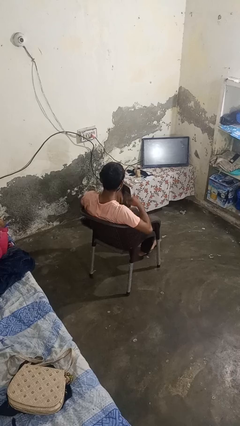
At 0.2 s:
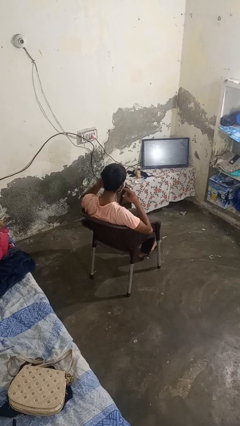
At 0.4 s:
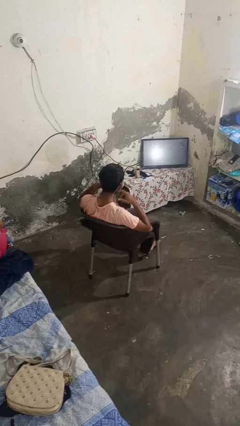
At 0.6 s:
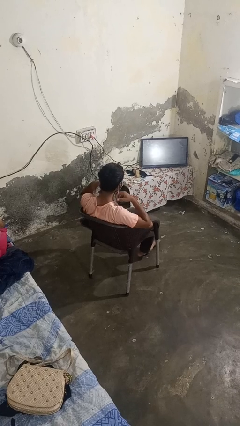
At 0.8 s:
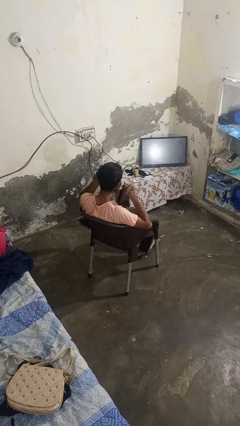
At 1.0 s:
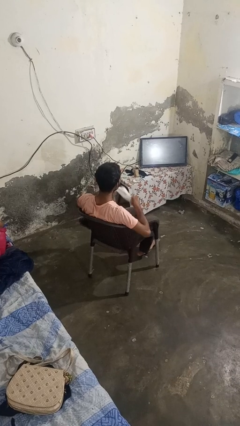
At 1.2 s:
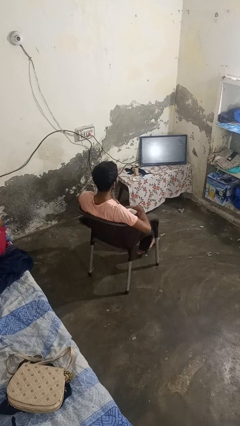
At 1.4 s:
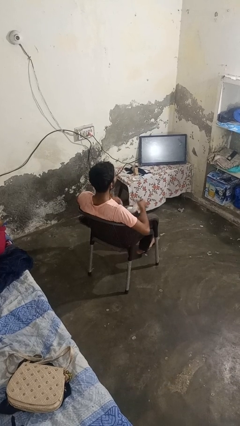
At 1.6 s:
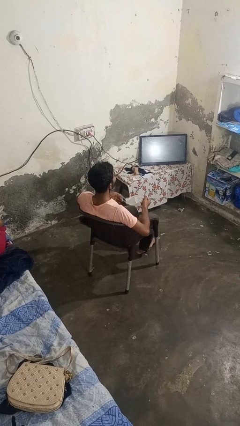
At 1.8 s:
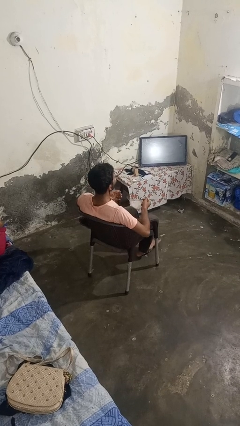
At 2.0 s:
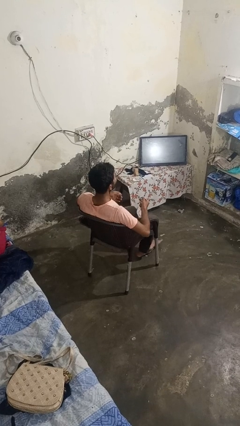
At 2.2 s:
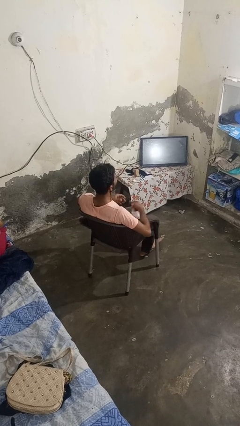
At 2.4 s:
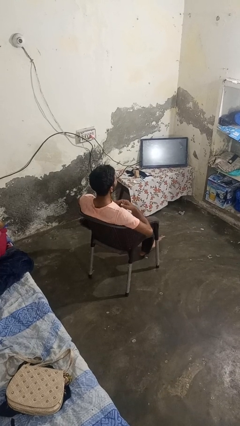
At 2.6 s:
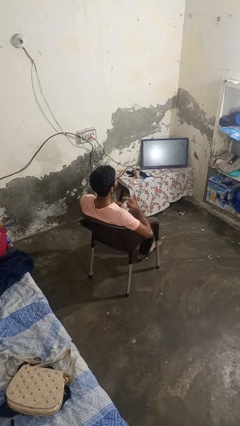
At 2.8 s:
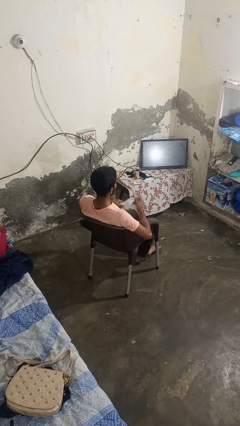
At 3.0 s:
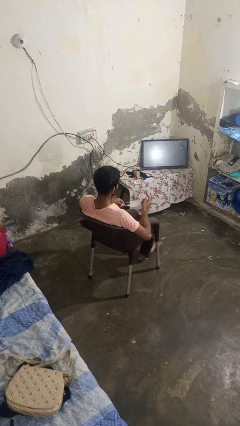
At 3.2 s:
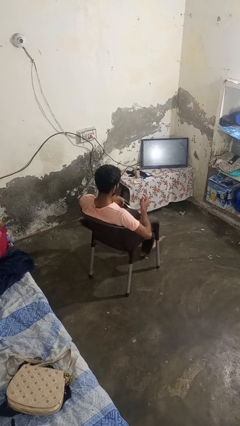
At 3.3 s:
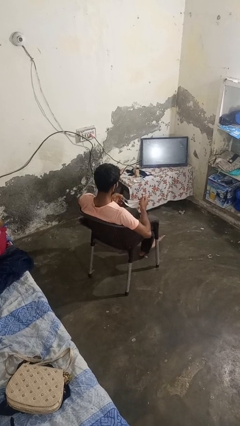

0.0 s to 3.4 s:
person takes off facemask

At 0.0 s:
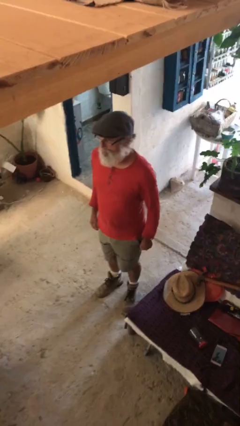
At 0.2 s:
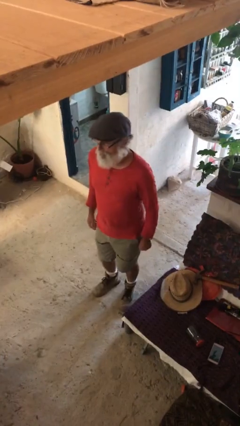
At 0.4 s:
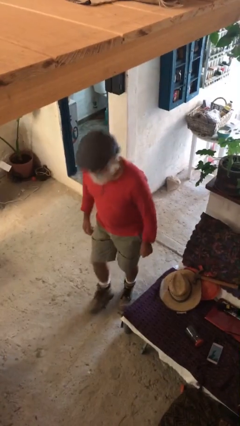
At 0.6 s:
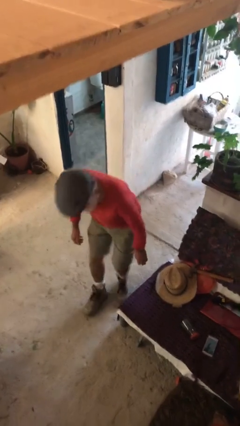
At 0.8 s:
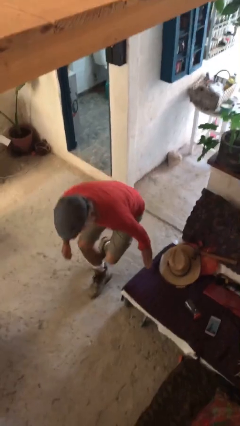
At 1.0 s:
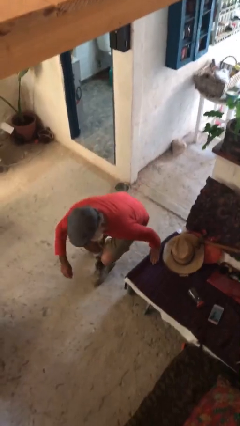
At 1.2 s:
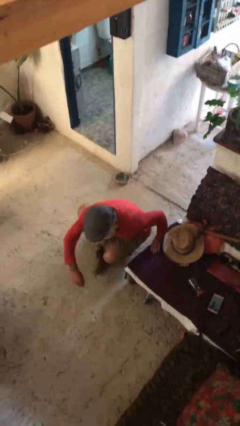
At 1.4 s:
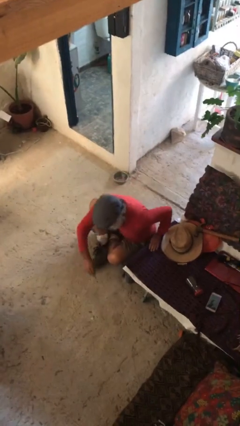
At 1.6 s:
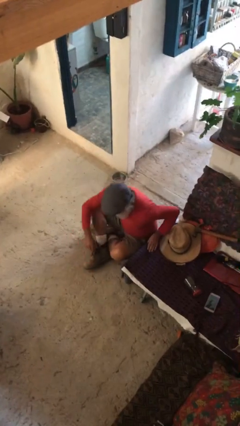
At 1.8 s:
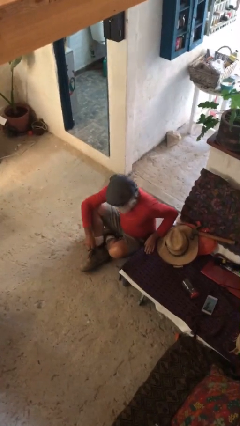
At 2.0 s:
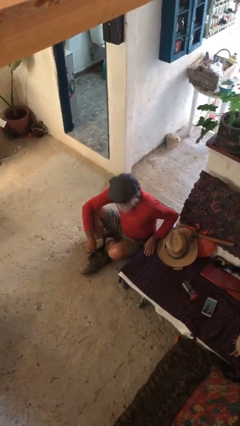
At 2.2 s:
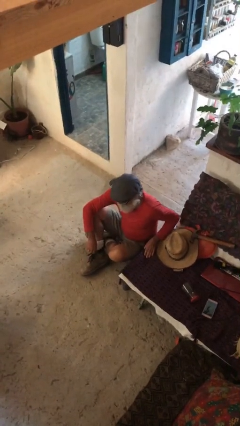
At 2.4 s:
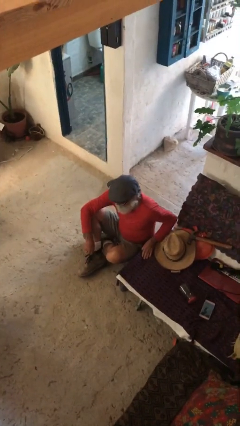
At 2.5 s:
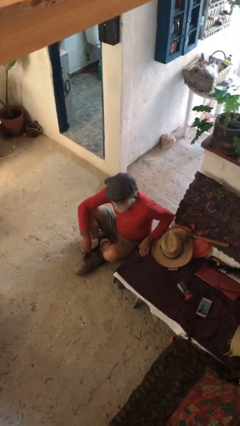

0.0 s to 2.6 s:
person sits down

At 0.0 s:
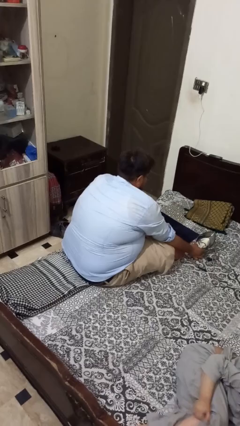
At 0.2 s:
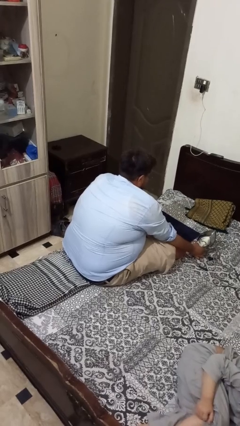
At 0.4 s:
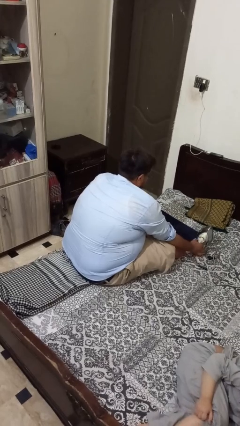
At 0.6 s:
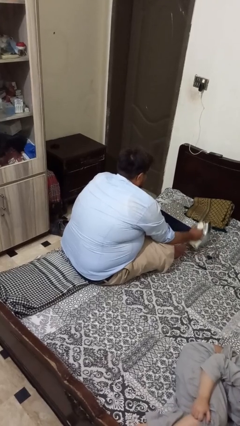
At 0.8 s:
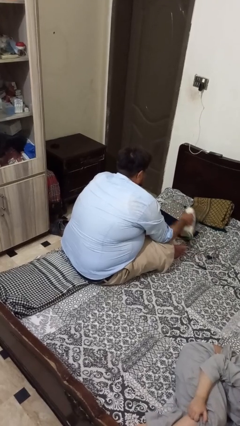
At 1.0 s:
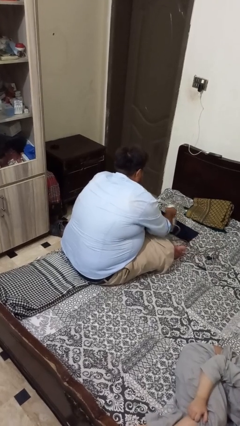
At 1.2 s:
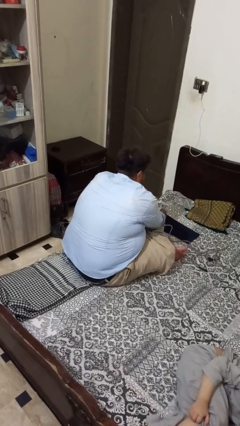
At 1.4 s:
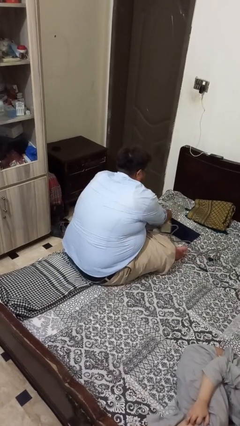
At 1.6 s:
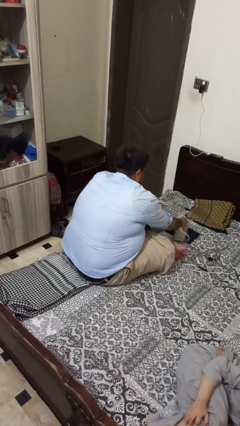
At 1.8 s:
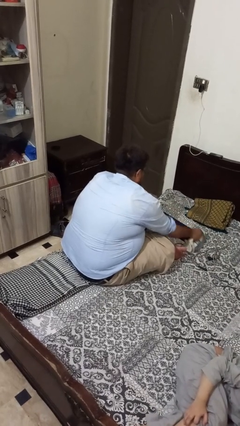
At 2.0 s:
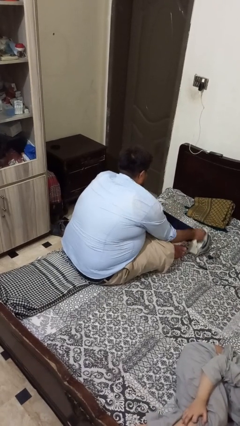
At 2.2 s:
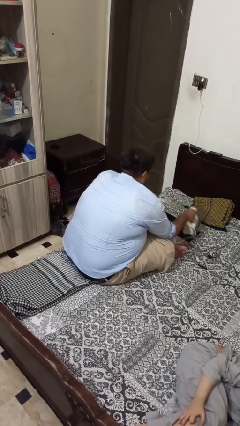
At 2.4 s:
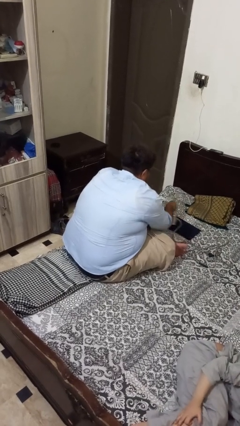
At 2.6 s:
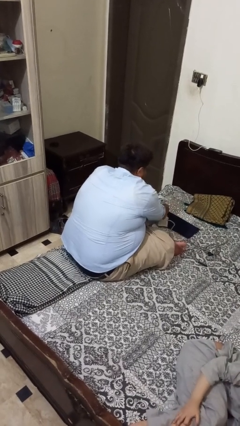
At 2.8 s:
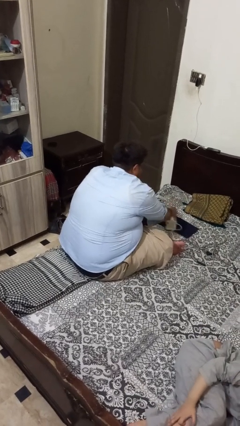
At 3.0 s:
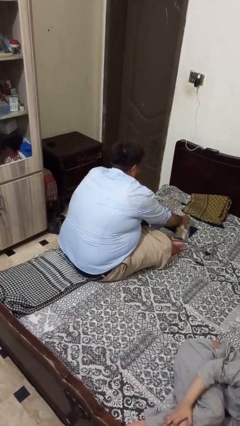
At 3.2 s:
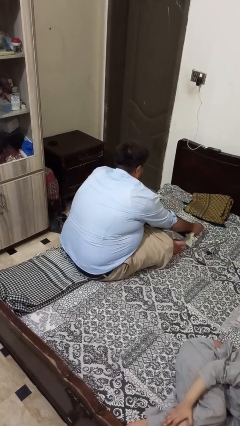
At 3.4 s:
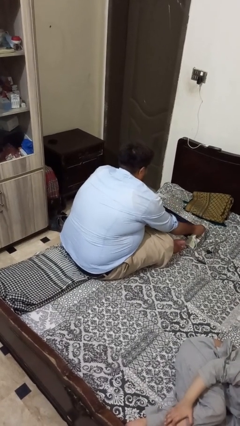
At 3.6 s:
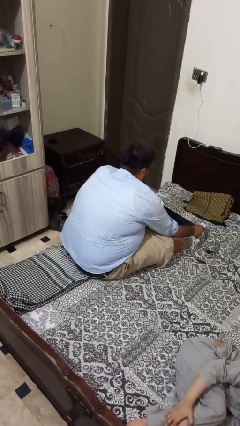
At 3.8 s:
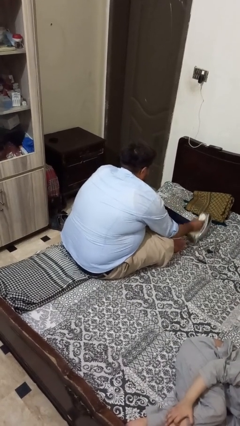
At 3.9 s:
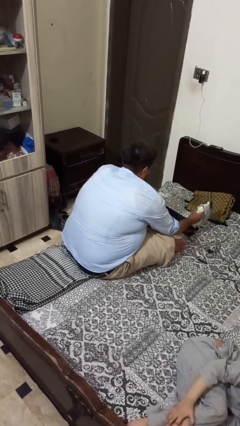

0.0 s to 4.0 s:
person irons clothes

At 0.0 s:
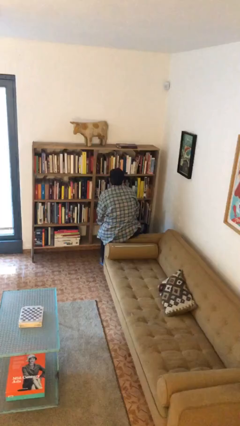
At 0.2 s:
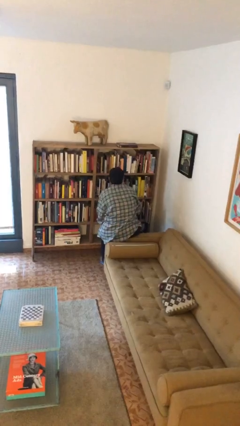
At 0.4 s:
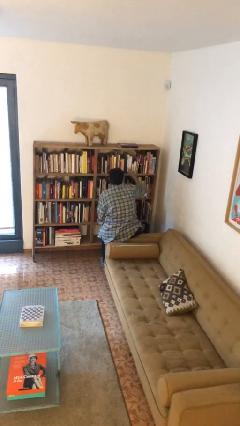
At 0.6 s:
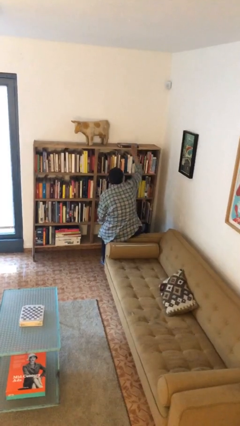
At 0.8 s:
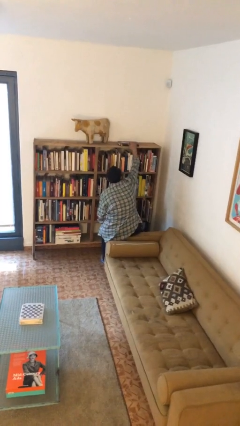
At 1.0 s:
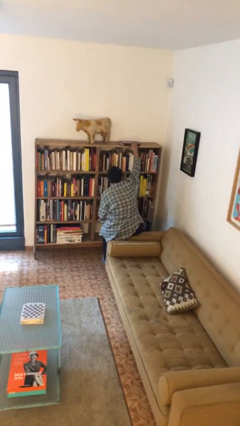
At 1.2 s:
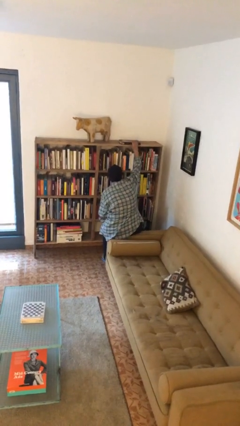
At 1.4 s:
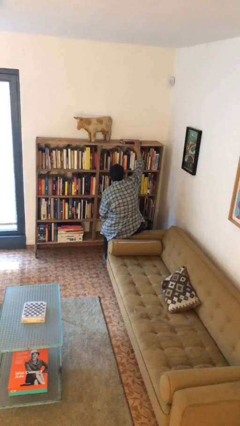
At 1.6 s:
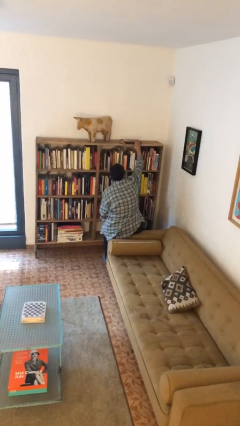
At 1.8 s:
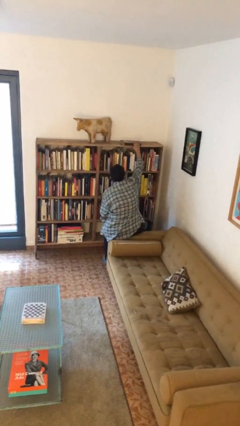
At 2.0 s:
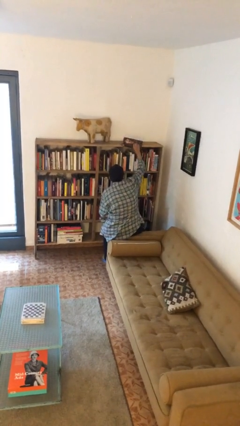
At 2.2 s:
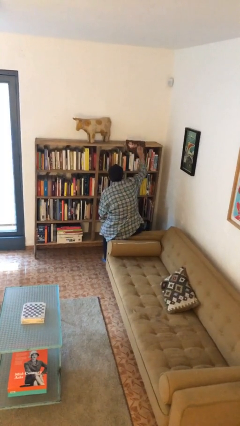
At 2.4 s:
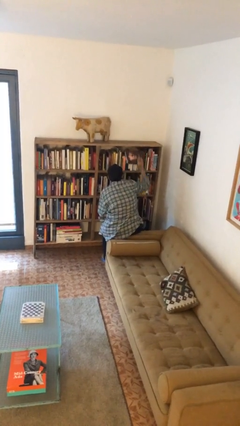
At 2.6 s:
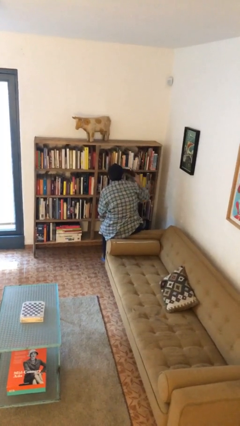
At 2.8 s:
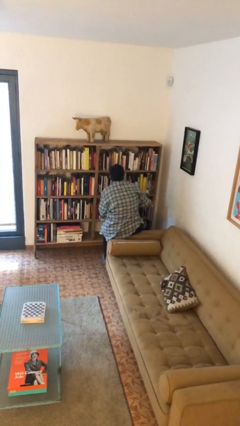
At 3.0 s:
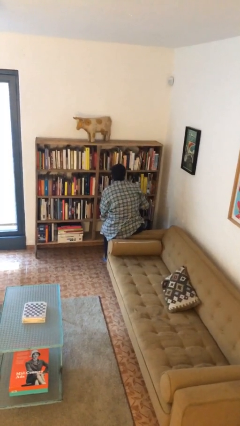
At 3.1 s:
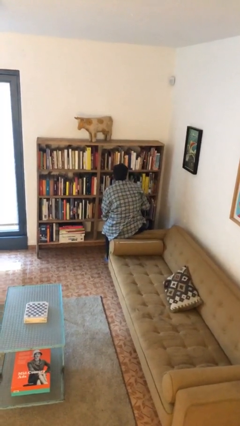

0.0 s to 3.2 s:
person picks up object from shelf

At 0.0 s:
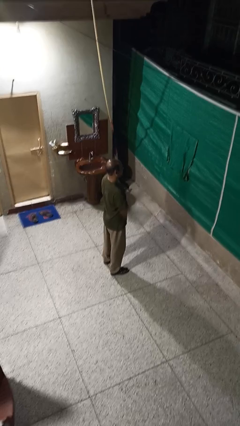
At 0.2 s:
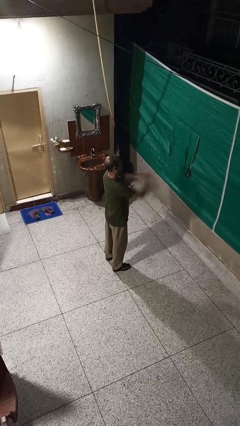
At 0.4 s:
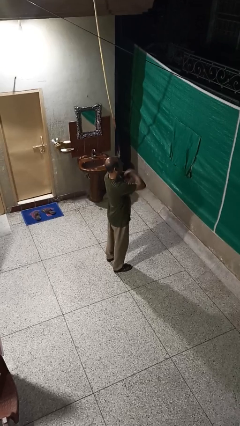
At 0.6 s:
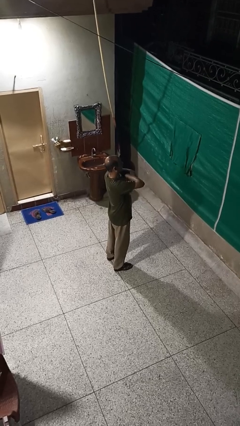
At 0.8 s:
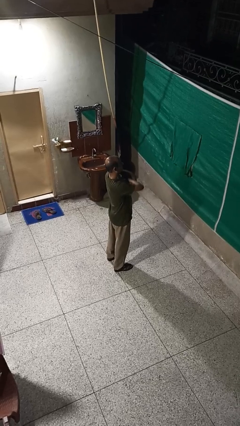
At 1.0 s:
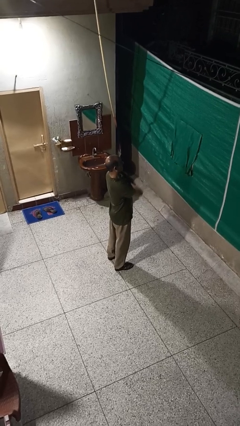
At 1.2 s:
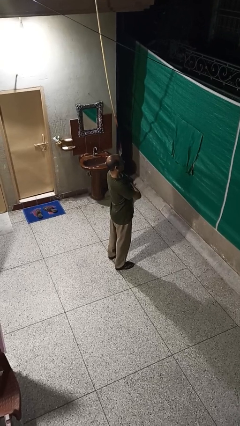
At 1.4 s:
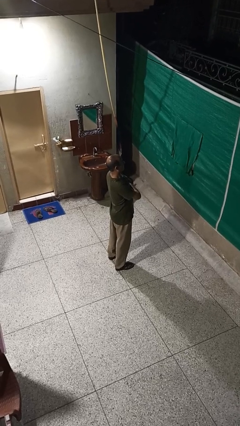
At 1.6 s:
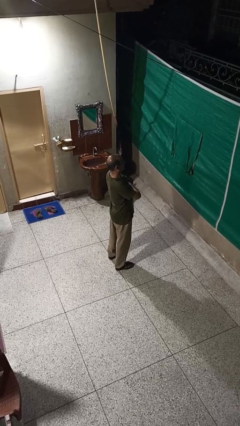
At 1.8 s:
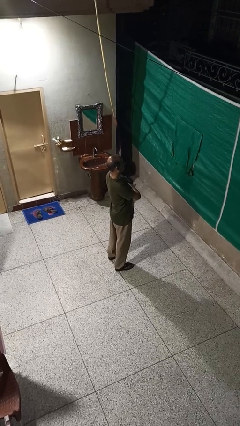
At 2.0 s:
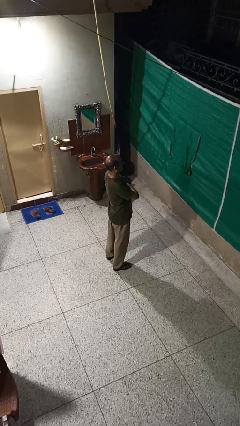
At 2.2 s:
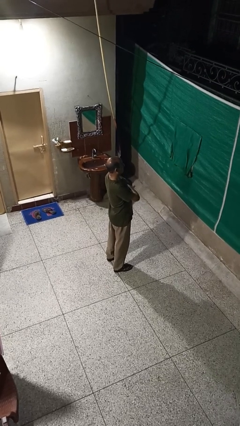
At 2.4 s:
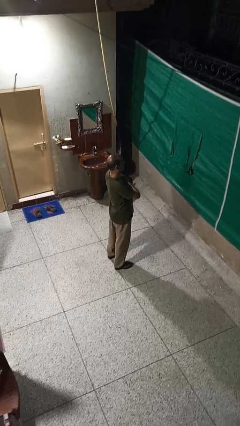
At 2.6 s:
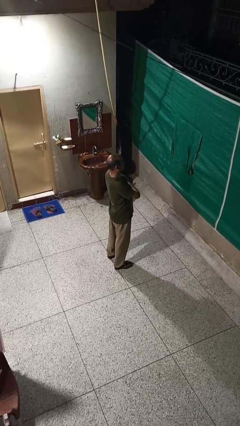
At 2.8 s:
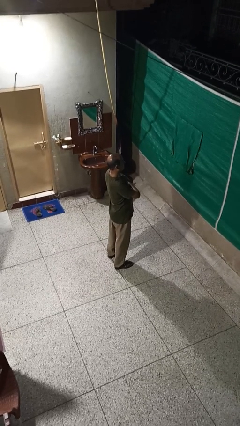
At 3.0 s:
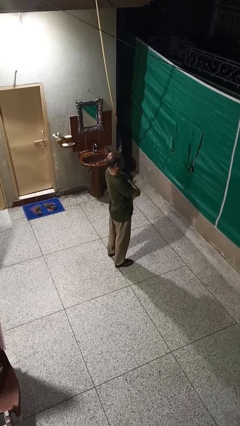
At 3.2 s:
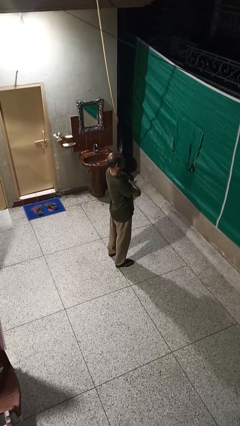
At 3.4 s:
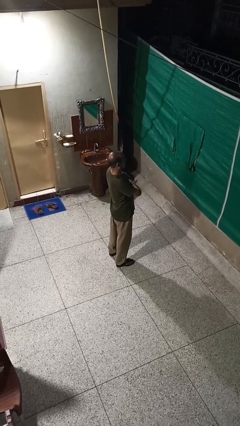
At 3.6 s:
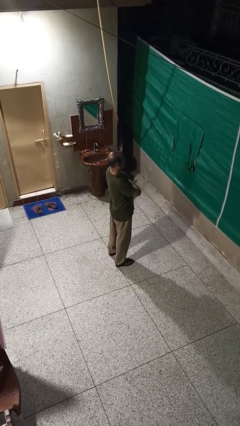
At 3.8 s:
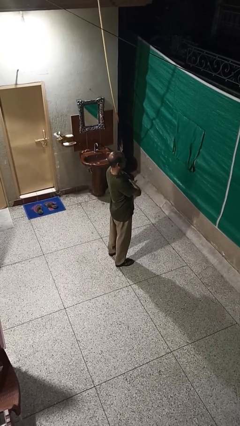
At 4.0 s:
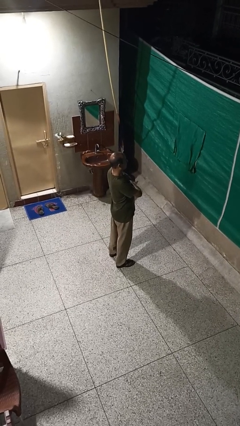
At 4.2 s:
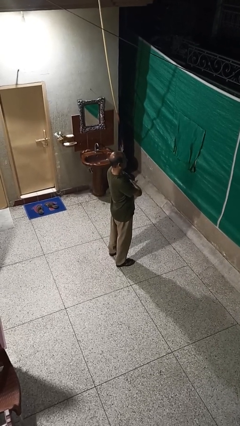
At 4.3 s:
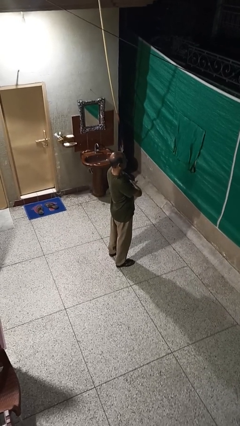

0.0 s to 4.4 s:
person crosses arms
